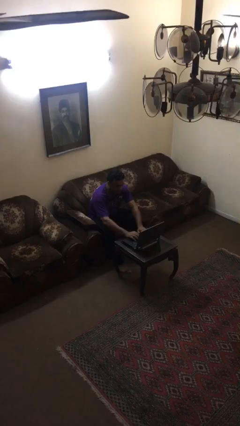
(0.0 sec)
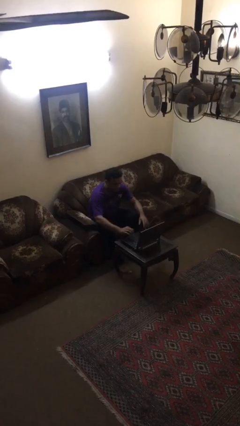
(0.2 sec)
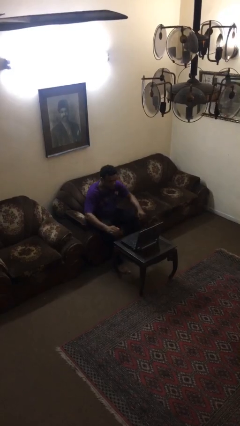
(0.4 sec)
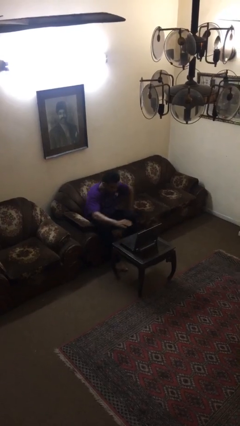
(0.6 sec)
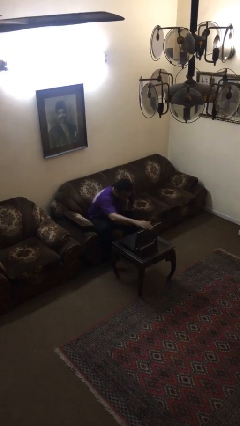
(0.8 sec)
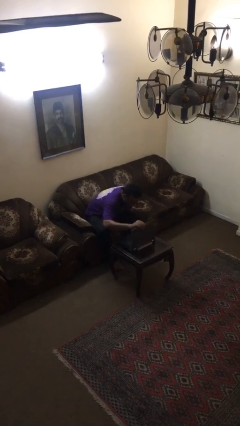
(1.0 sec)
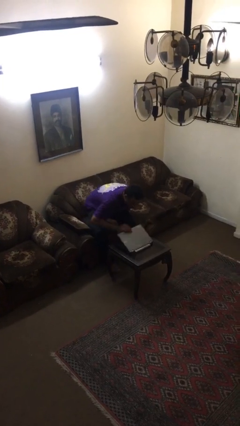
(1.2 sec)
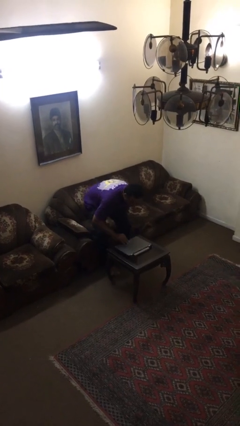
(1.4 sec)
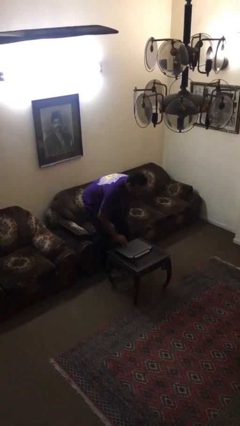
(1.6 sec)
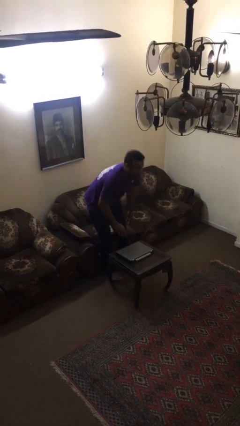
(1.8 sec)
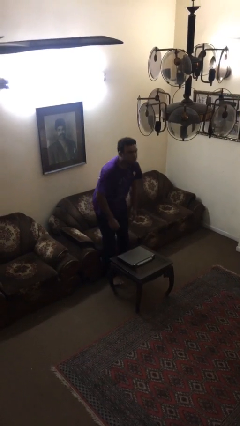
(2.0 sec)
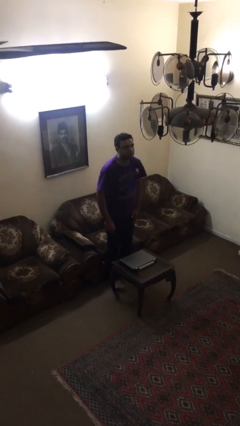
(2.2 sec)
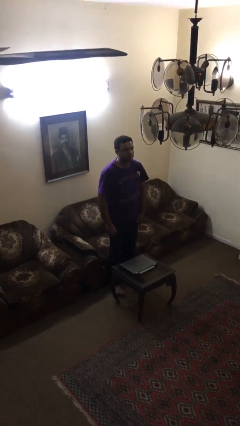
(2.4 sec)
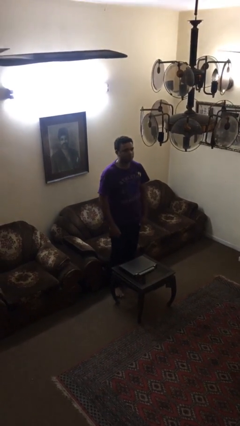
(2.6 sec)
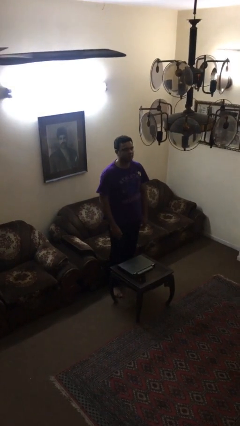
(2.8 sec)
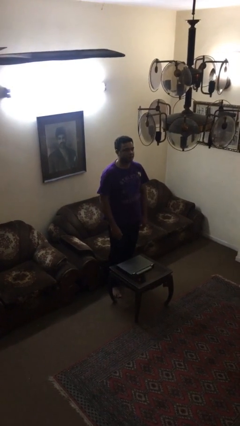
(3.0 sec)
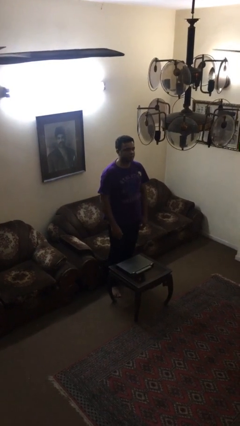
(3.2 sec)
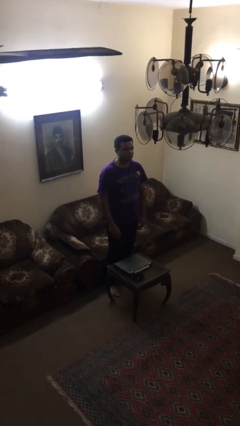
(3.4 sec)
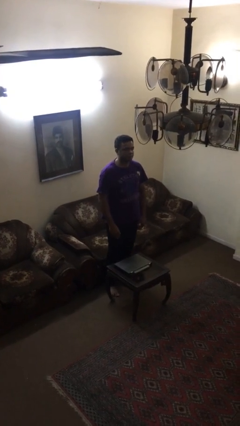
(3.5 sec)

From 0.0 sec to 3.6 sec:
person stands up

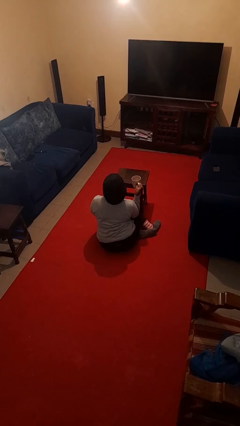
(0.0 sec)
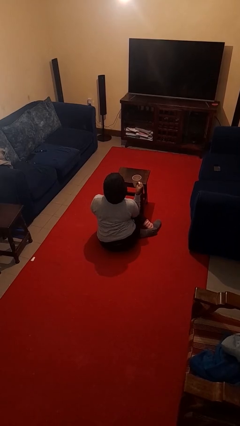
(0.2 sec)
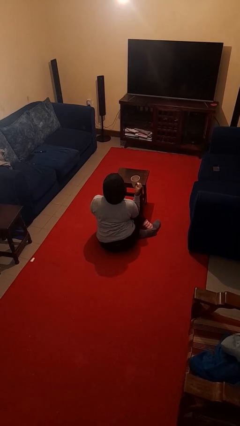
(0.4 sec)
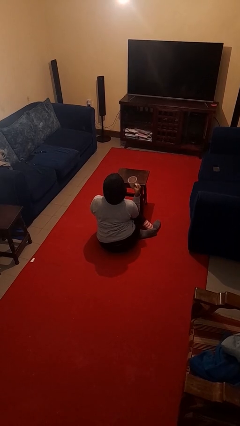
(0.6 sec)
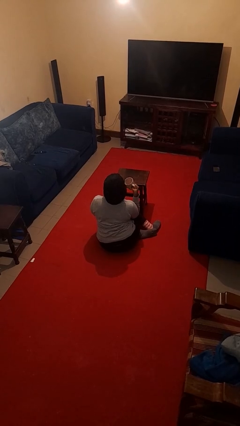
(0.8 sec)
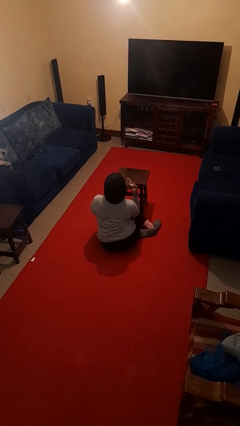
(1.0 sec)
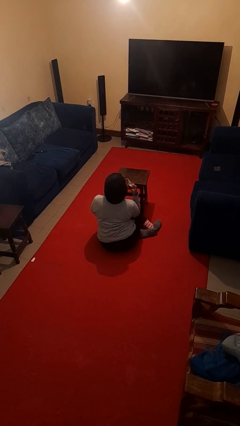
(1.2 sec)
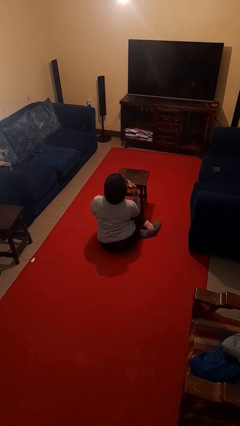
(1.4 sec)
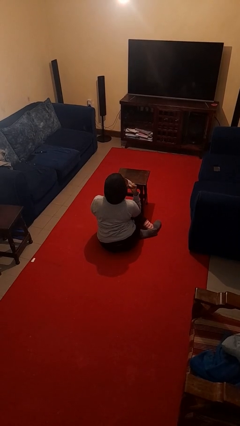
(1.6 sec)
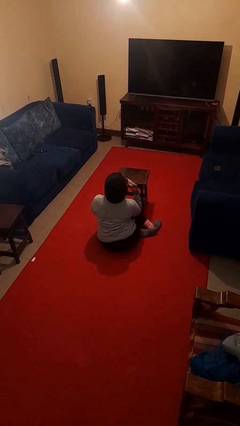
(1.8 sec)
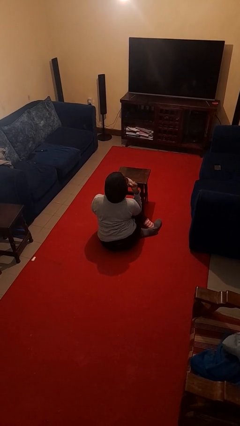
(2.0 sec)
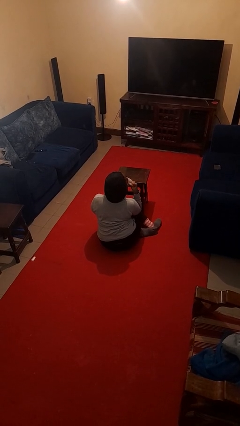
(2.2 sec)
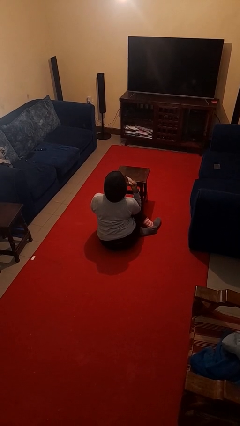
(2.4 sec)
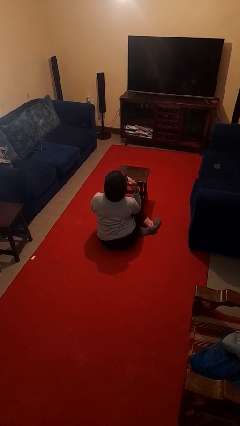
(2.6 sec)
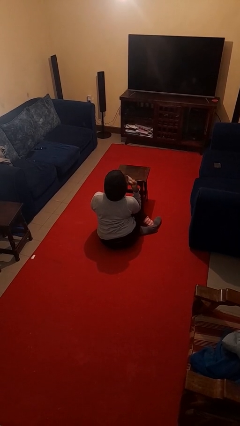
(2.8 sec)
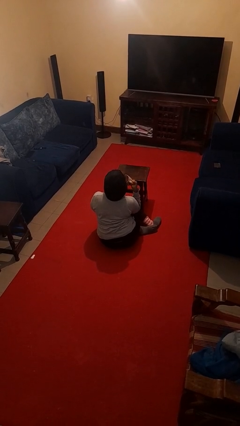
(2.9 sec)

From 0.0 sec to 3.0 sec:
person drinks from mug

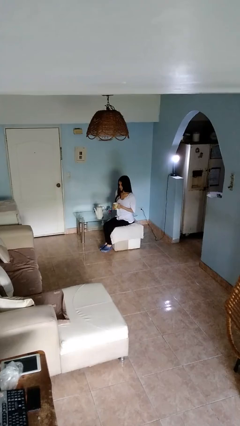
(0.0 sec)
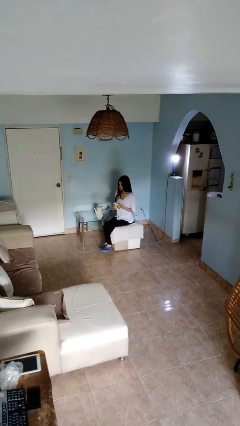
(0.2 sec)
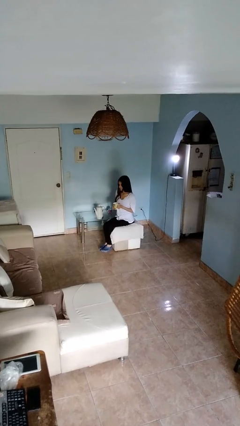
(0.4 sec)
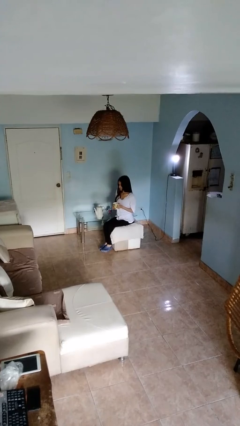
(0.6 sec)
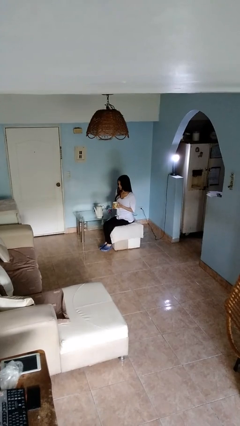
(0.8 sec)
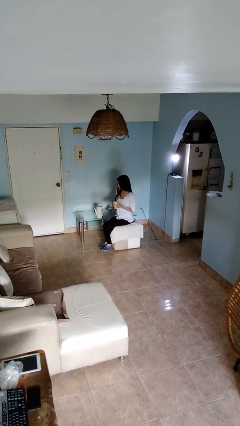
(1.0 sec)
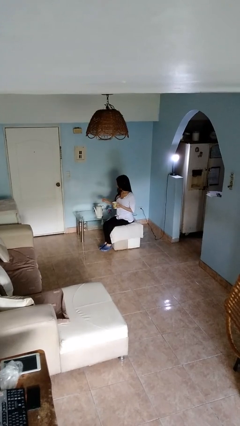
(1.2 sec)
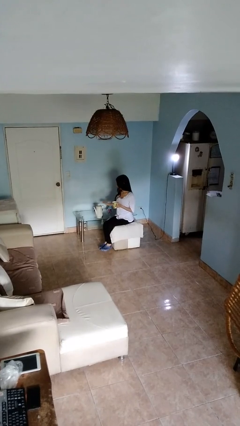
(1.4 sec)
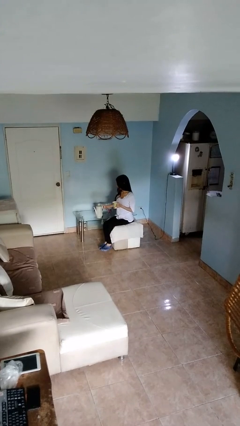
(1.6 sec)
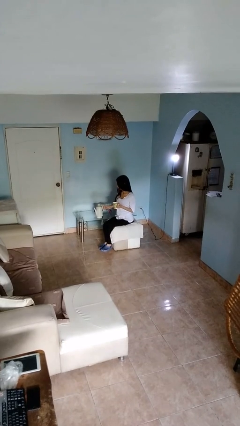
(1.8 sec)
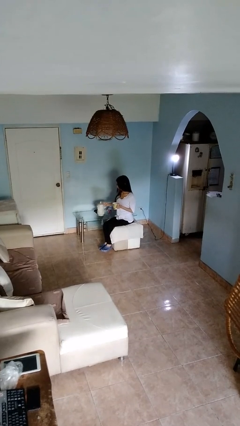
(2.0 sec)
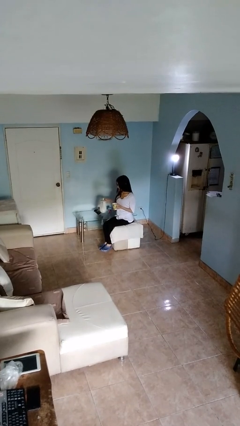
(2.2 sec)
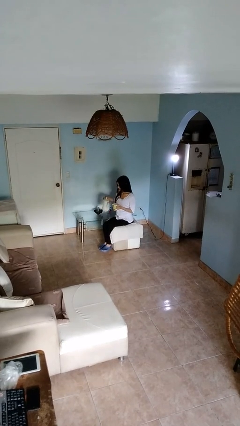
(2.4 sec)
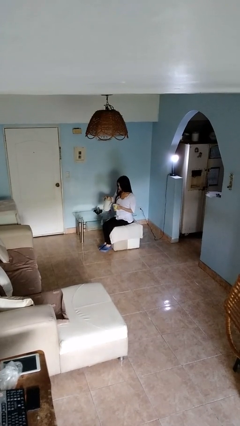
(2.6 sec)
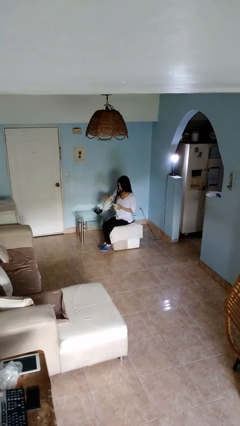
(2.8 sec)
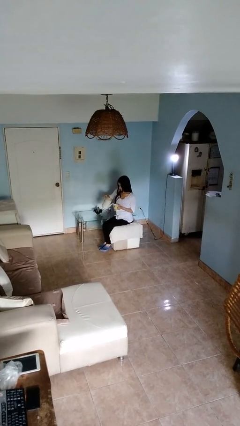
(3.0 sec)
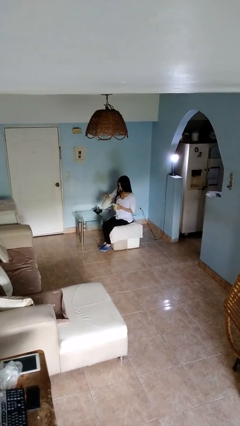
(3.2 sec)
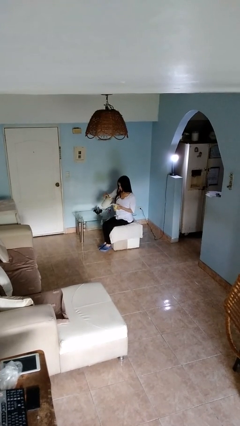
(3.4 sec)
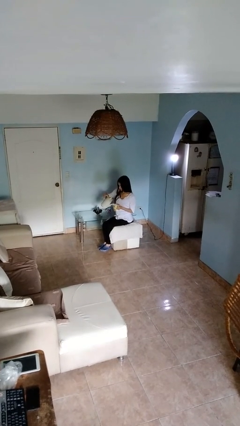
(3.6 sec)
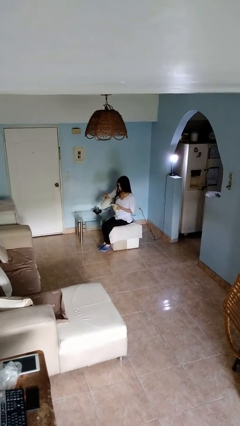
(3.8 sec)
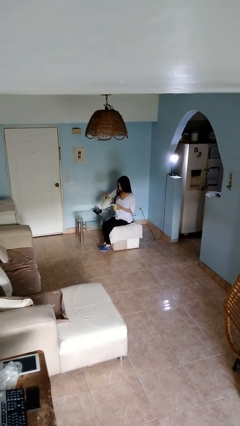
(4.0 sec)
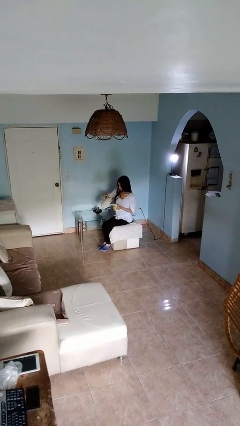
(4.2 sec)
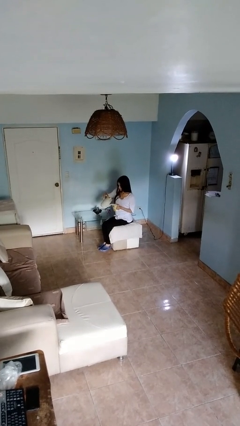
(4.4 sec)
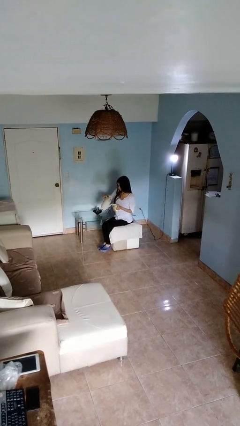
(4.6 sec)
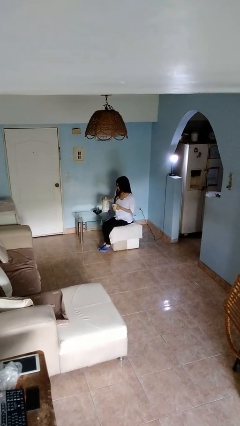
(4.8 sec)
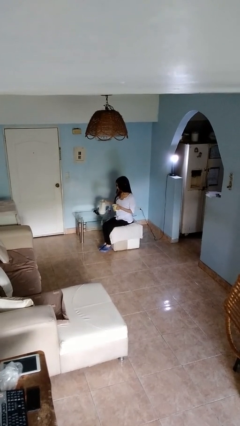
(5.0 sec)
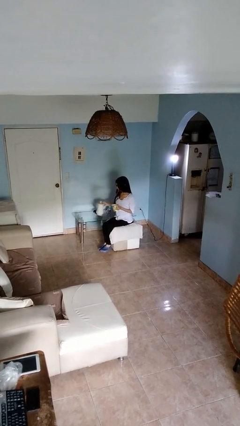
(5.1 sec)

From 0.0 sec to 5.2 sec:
person pours coffee into mug

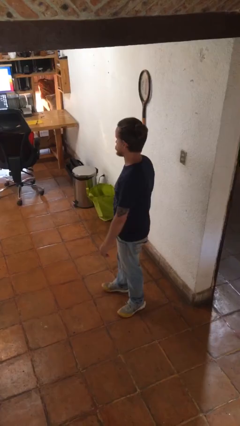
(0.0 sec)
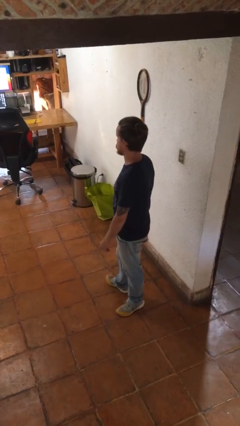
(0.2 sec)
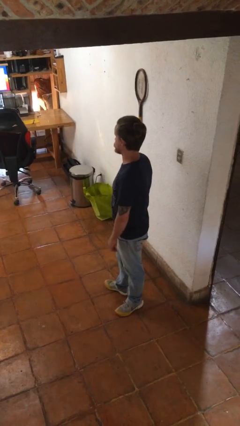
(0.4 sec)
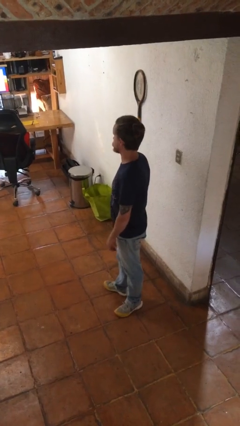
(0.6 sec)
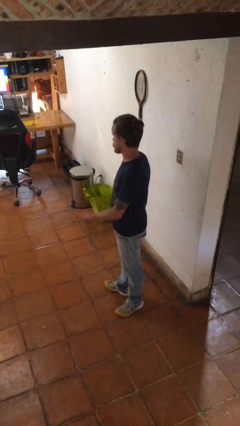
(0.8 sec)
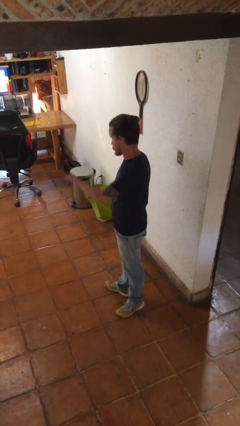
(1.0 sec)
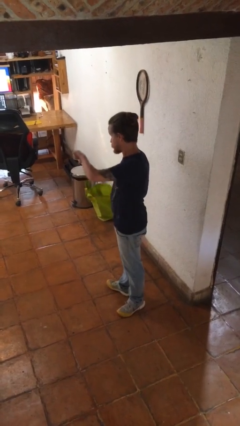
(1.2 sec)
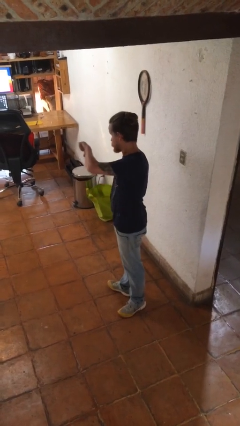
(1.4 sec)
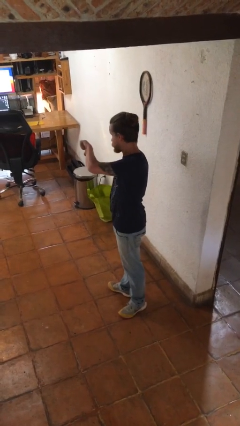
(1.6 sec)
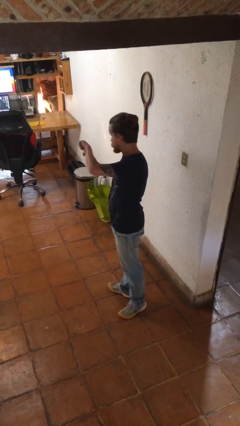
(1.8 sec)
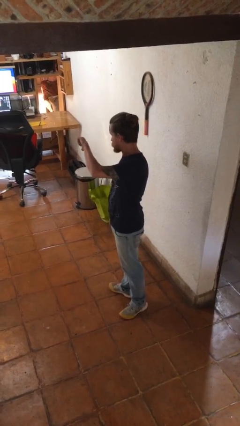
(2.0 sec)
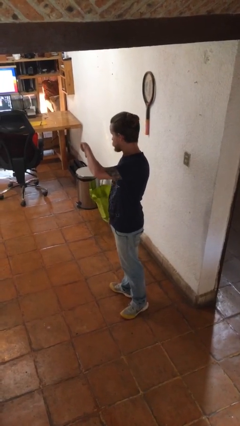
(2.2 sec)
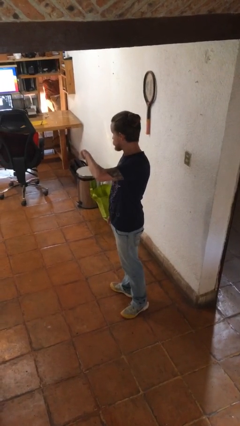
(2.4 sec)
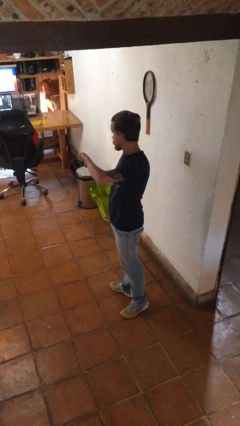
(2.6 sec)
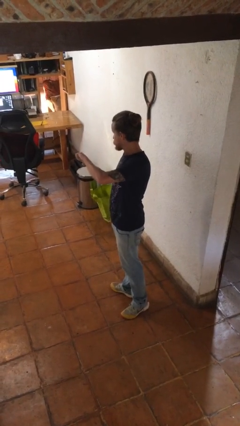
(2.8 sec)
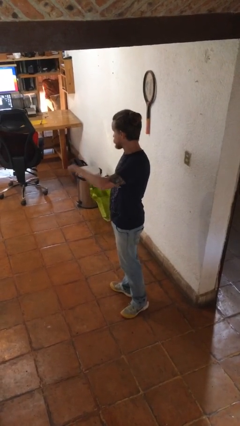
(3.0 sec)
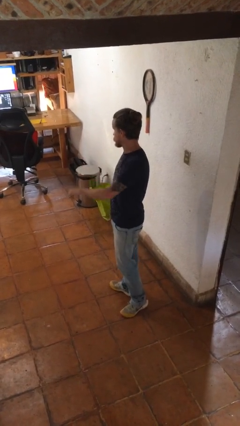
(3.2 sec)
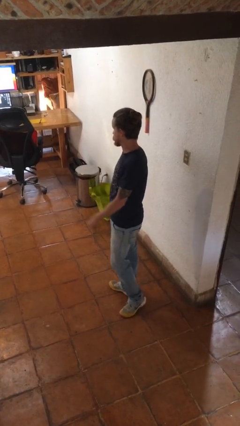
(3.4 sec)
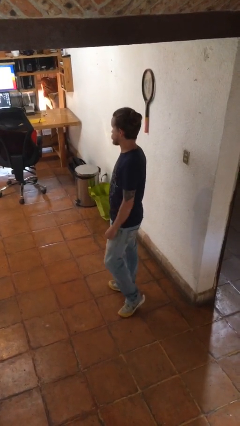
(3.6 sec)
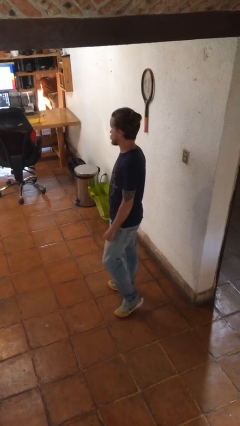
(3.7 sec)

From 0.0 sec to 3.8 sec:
person gestures thumbs down

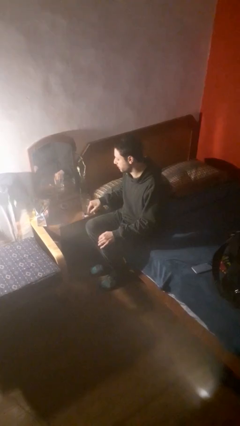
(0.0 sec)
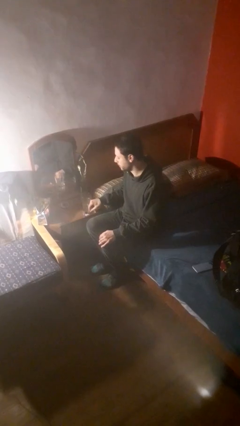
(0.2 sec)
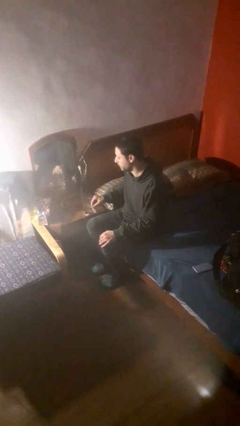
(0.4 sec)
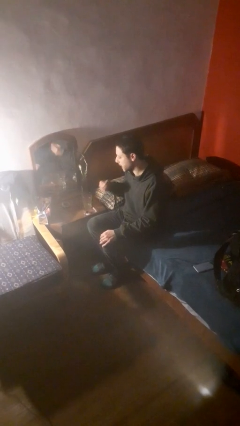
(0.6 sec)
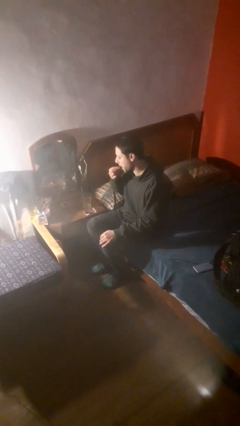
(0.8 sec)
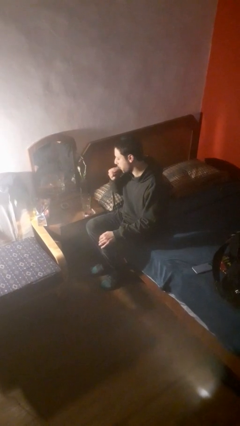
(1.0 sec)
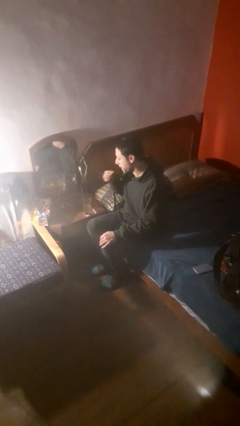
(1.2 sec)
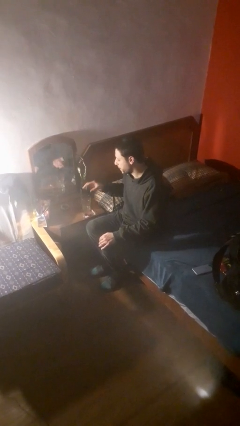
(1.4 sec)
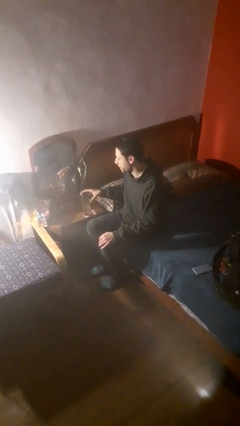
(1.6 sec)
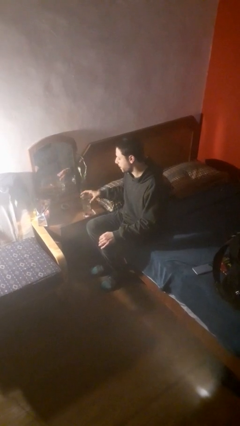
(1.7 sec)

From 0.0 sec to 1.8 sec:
person takes medicine pills
